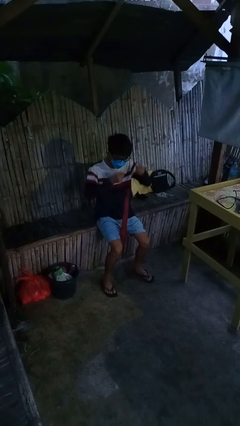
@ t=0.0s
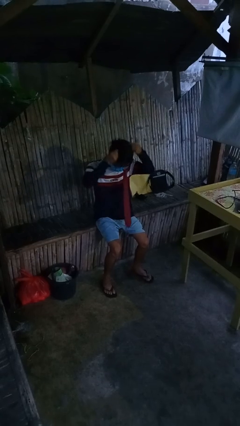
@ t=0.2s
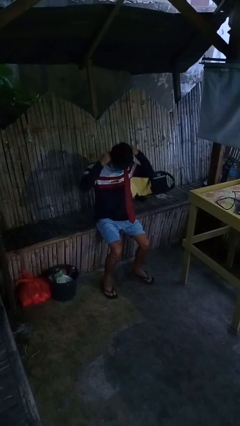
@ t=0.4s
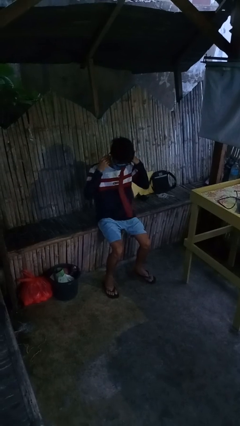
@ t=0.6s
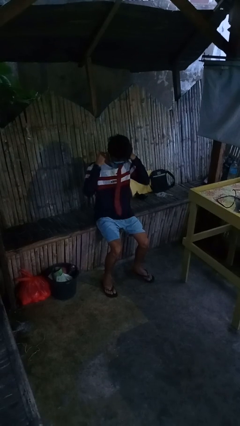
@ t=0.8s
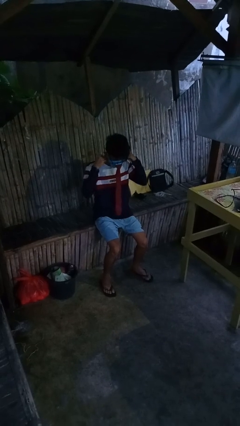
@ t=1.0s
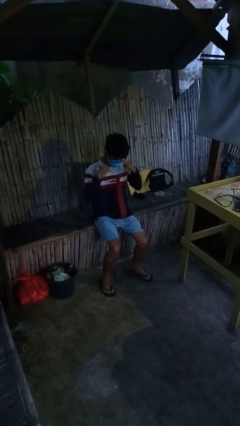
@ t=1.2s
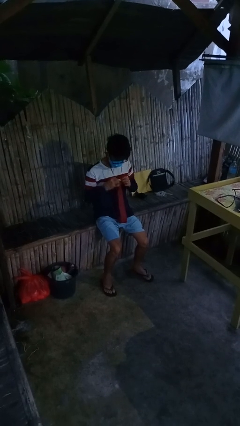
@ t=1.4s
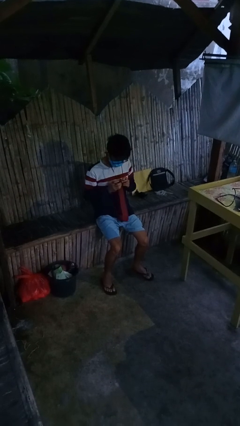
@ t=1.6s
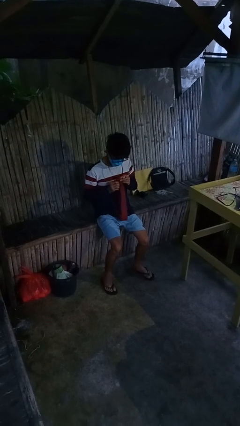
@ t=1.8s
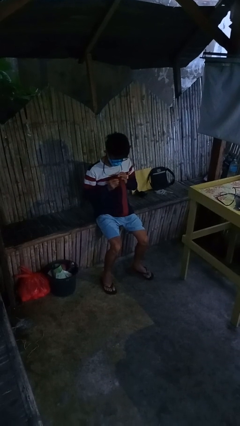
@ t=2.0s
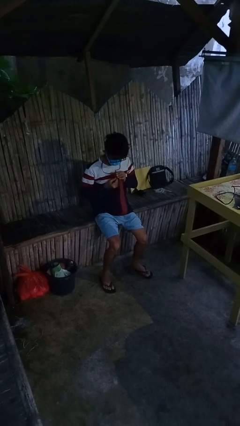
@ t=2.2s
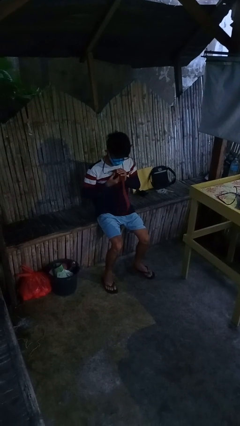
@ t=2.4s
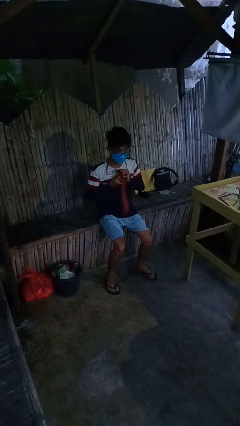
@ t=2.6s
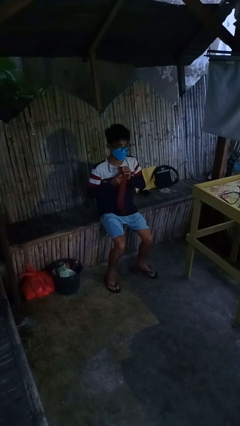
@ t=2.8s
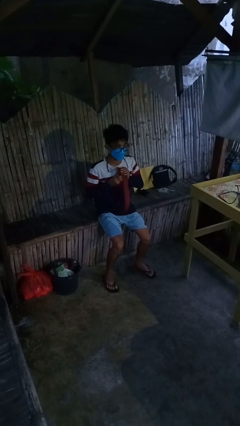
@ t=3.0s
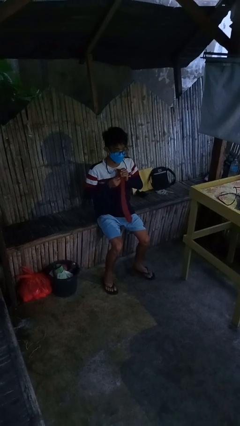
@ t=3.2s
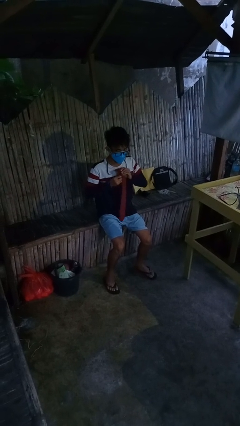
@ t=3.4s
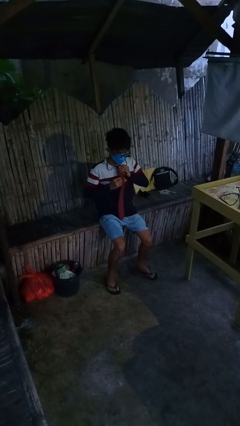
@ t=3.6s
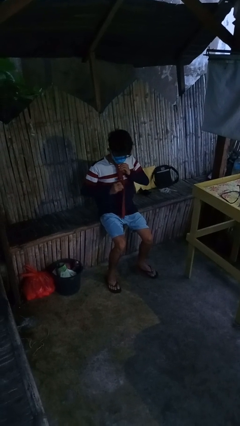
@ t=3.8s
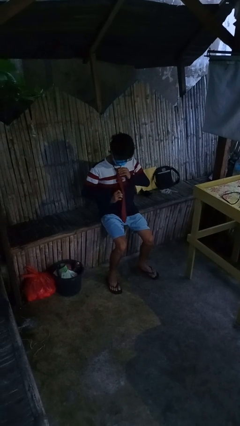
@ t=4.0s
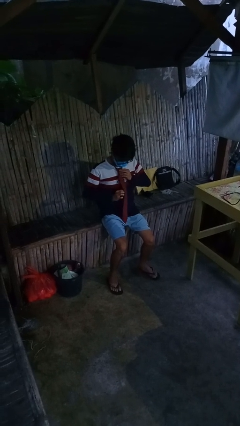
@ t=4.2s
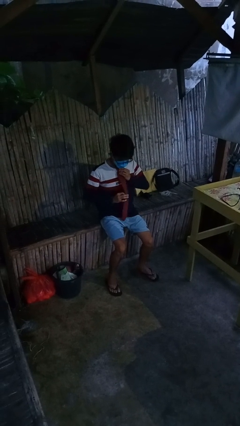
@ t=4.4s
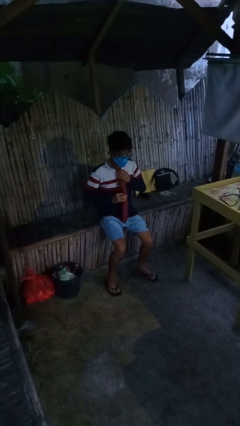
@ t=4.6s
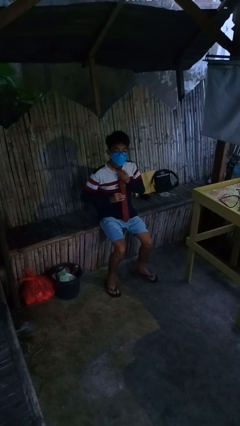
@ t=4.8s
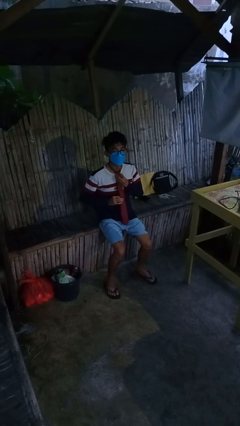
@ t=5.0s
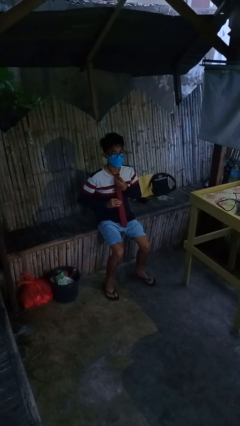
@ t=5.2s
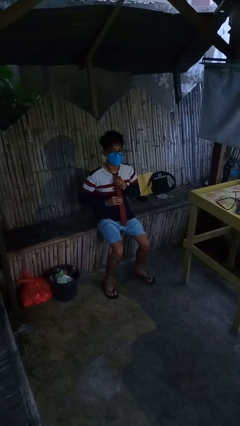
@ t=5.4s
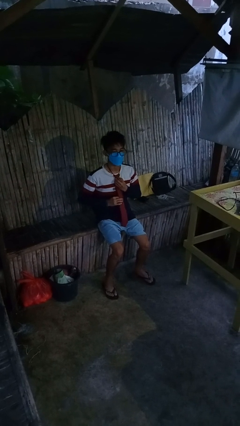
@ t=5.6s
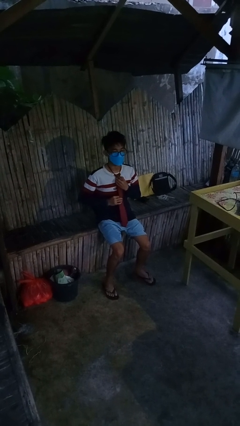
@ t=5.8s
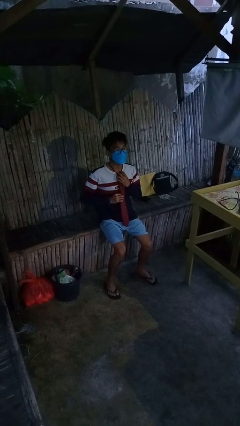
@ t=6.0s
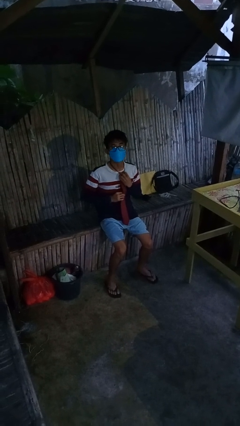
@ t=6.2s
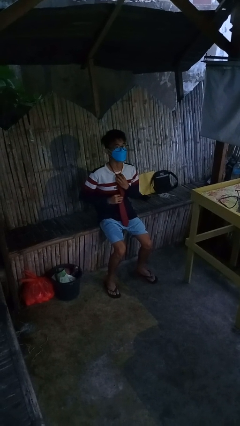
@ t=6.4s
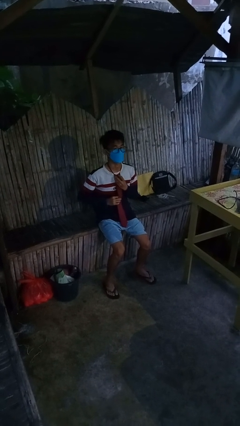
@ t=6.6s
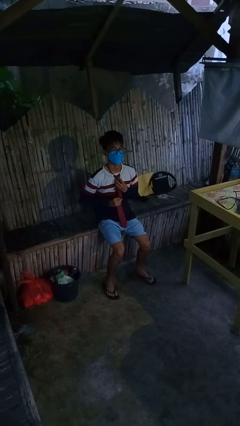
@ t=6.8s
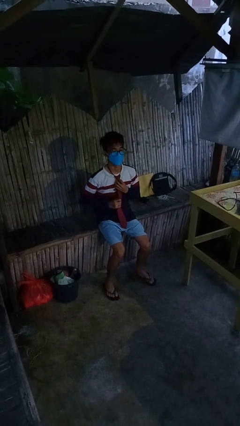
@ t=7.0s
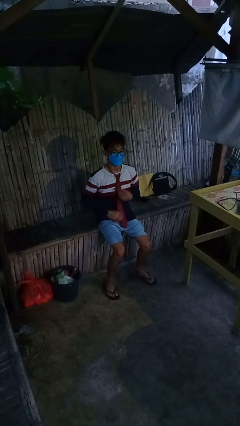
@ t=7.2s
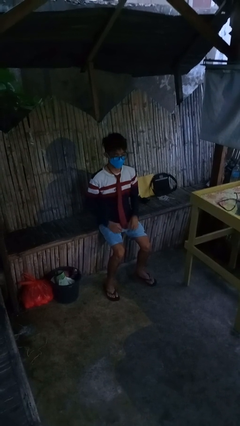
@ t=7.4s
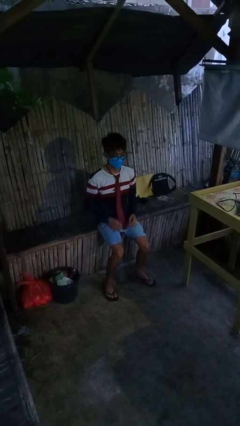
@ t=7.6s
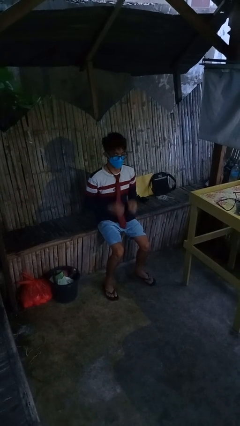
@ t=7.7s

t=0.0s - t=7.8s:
person puts on necktie

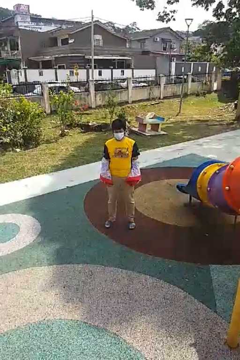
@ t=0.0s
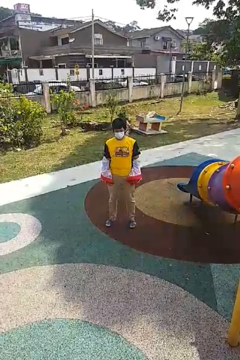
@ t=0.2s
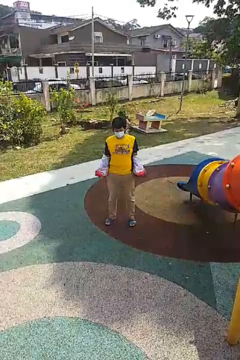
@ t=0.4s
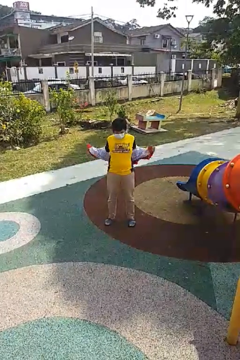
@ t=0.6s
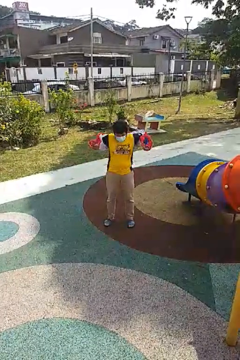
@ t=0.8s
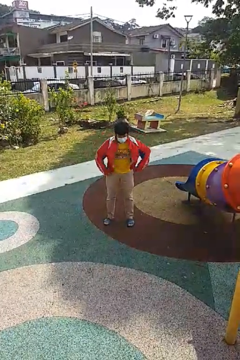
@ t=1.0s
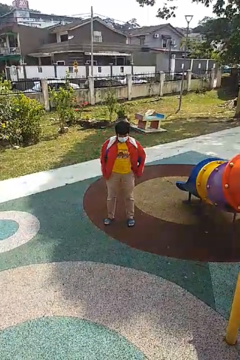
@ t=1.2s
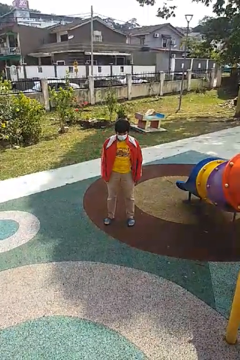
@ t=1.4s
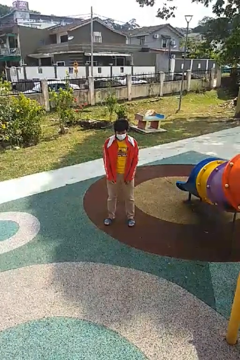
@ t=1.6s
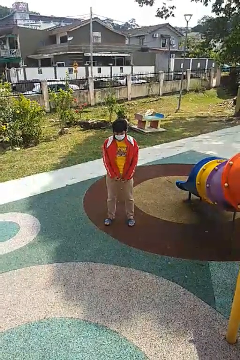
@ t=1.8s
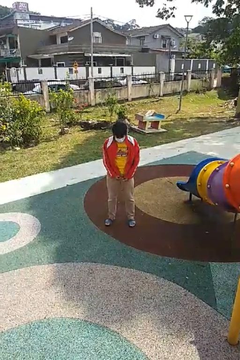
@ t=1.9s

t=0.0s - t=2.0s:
person puts on jacket

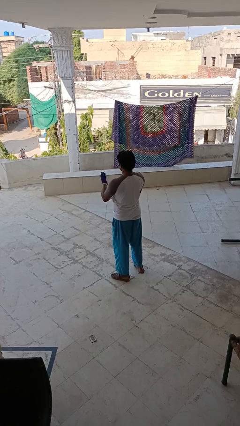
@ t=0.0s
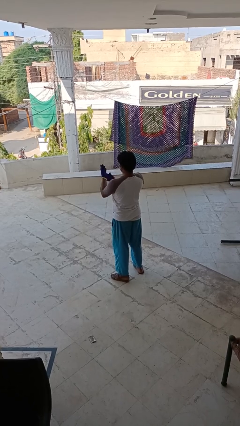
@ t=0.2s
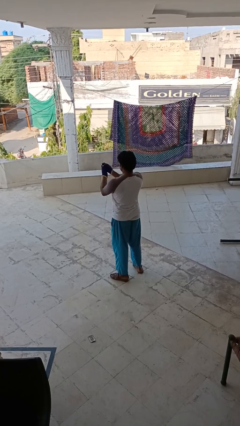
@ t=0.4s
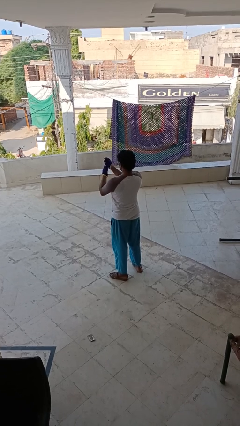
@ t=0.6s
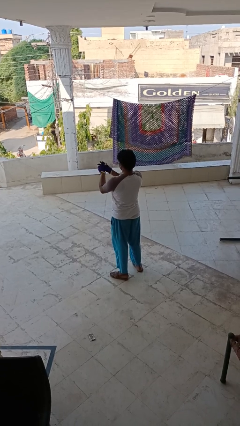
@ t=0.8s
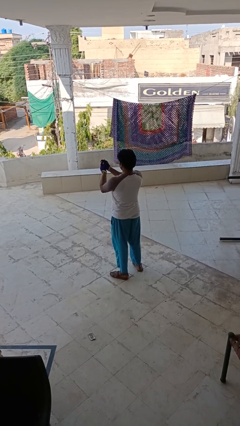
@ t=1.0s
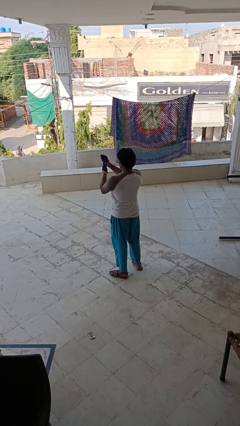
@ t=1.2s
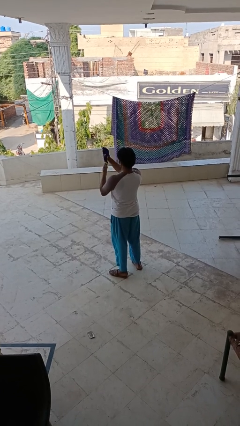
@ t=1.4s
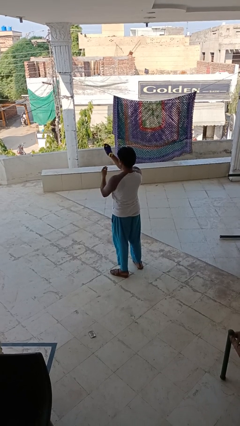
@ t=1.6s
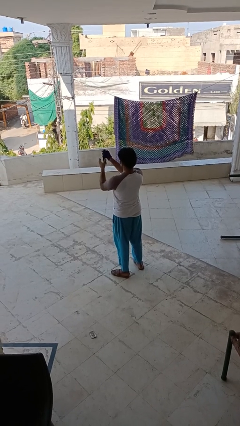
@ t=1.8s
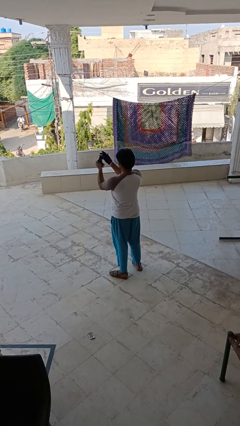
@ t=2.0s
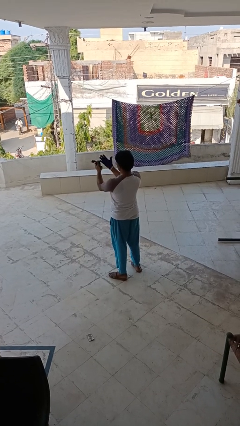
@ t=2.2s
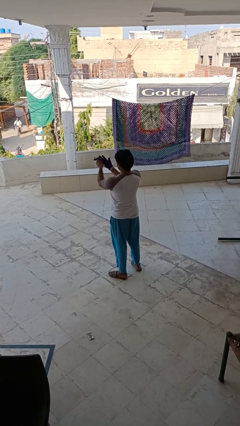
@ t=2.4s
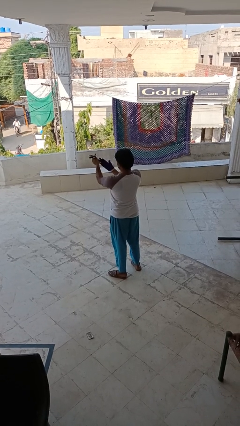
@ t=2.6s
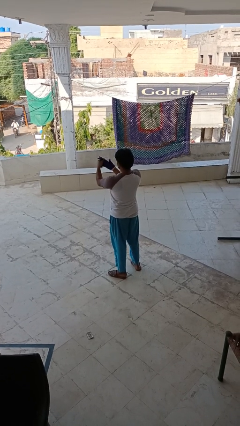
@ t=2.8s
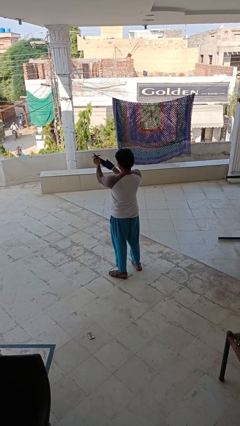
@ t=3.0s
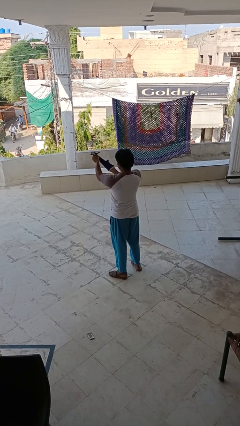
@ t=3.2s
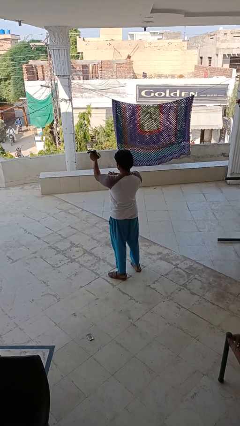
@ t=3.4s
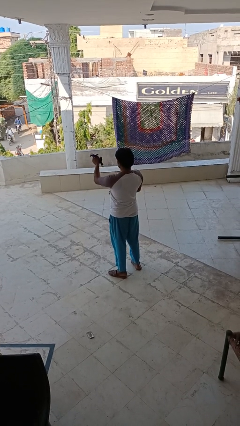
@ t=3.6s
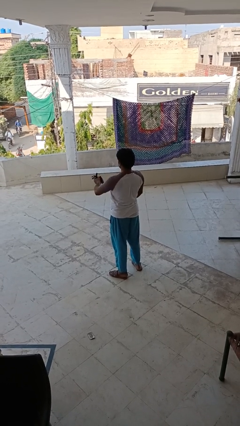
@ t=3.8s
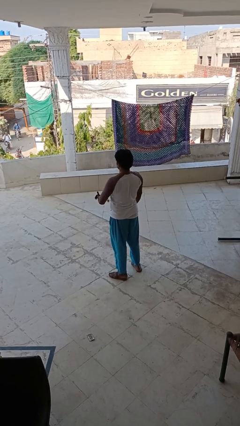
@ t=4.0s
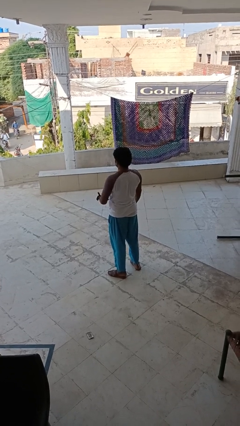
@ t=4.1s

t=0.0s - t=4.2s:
person takes off gloves

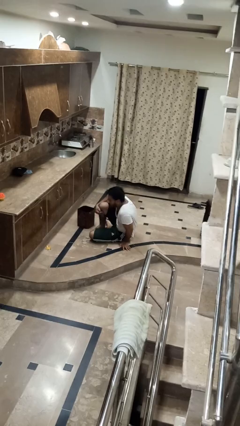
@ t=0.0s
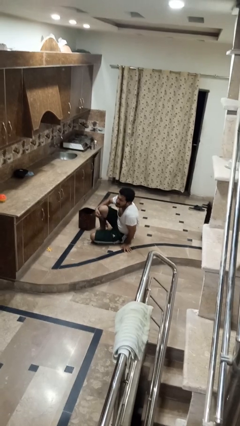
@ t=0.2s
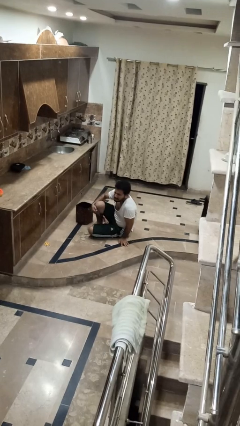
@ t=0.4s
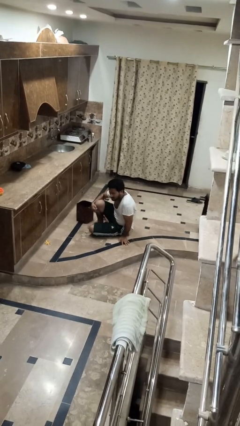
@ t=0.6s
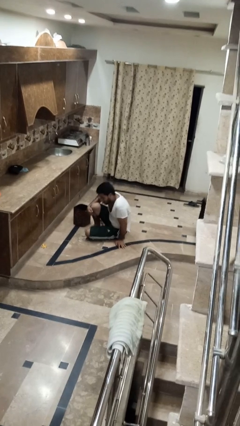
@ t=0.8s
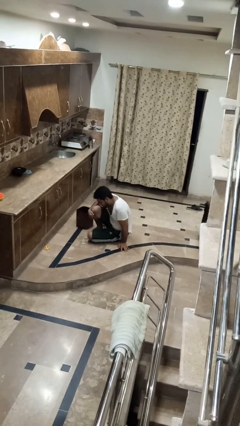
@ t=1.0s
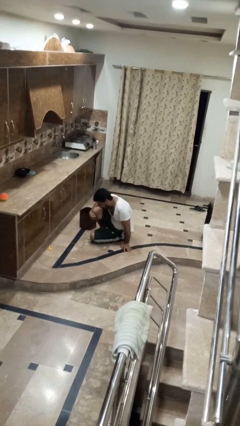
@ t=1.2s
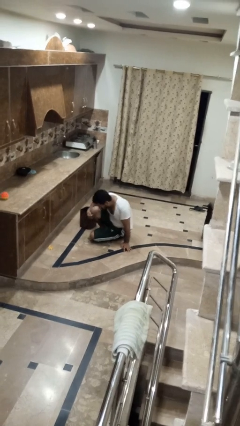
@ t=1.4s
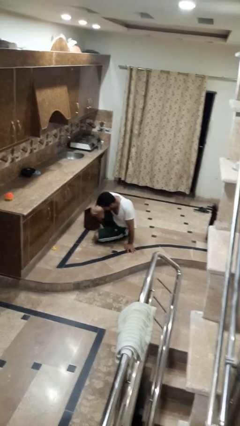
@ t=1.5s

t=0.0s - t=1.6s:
person lies down on floor

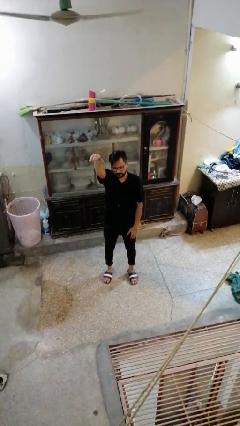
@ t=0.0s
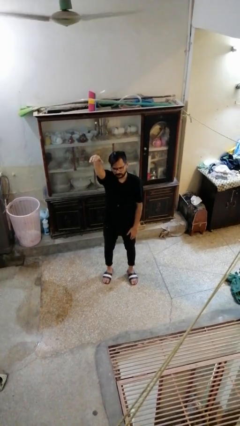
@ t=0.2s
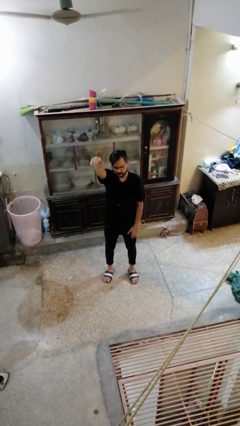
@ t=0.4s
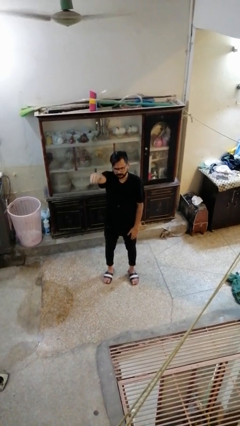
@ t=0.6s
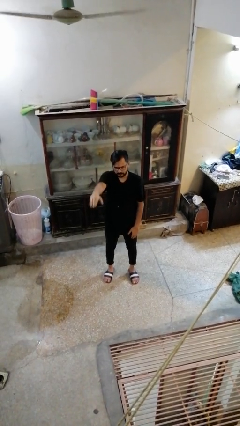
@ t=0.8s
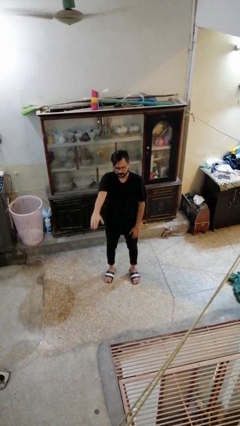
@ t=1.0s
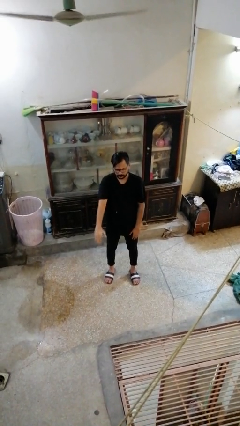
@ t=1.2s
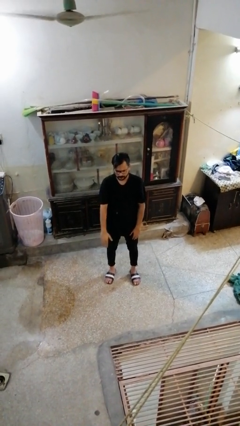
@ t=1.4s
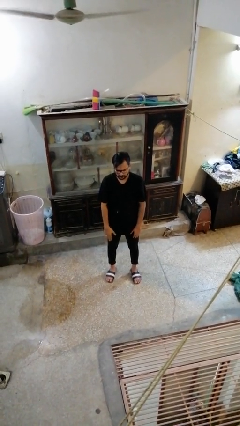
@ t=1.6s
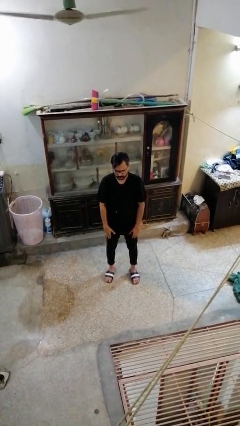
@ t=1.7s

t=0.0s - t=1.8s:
person gestures swipe down
